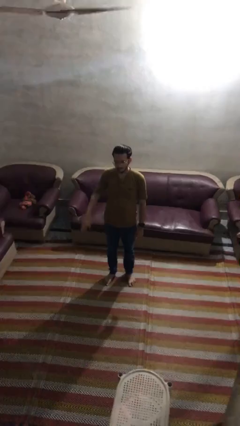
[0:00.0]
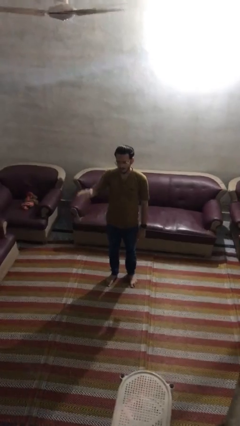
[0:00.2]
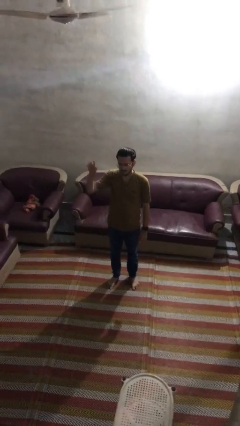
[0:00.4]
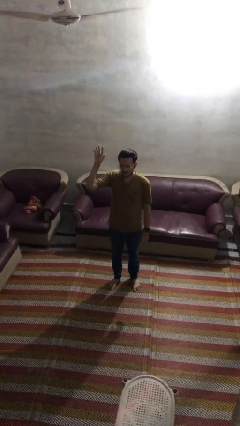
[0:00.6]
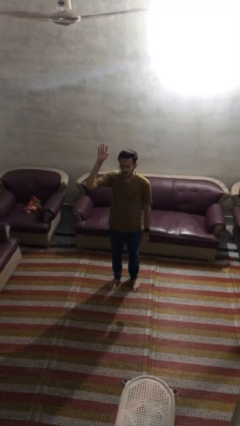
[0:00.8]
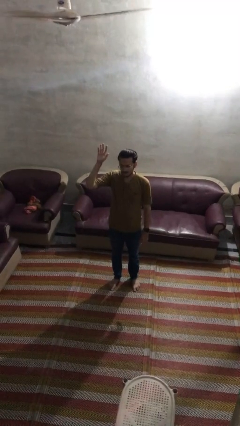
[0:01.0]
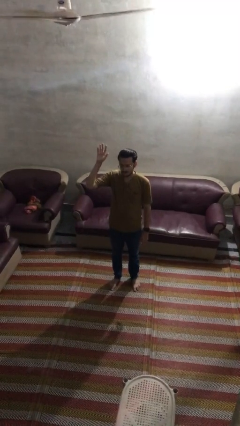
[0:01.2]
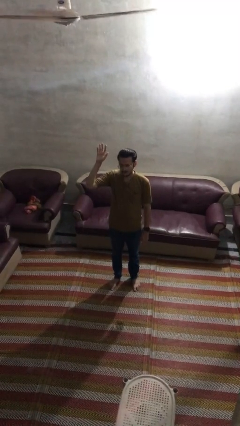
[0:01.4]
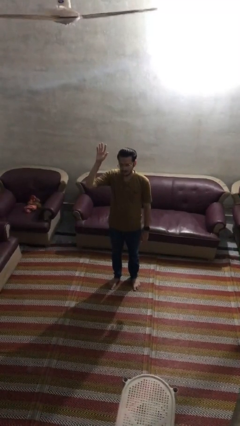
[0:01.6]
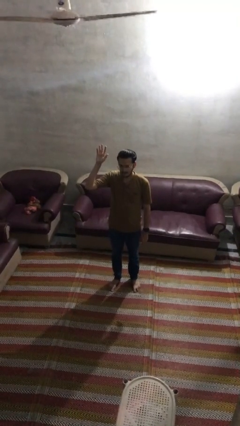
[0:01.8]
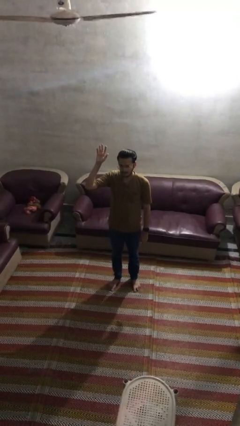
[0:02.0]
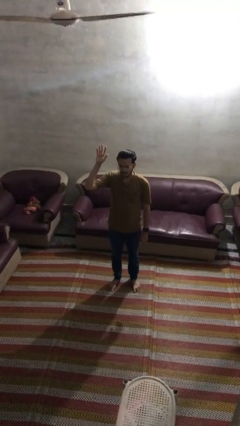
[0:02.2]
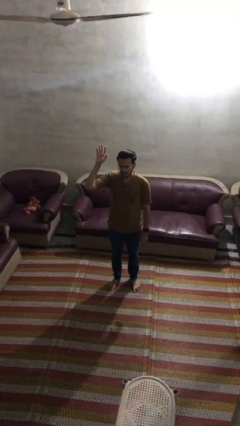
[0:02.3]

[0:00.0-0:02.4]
person gestures raise hand

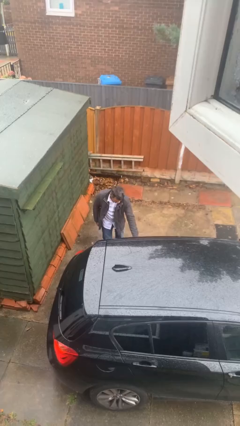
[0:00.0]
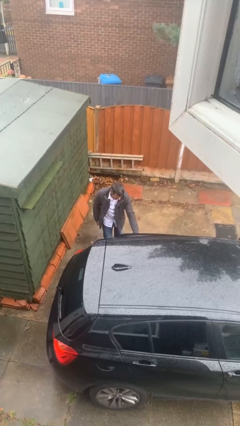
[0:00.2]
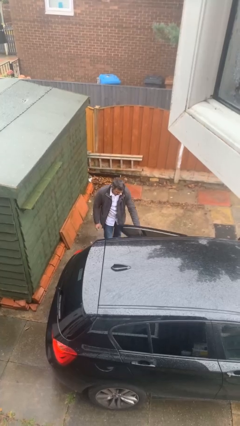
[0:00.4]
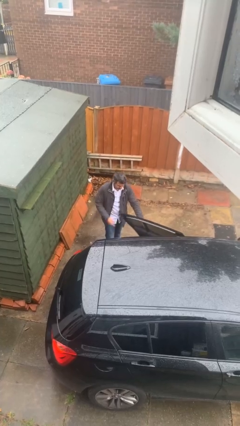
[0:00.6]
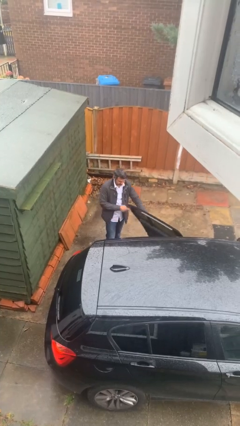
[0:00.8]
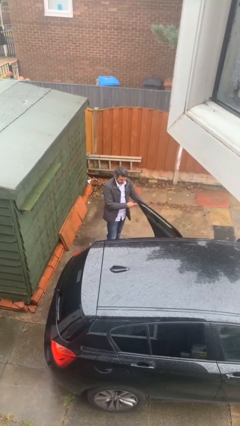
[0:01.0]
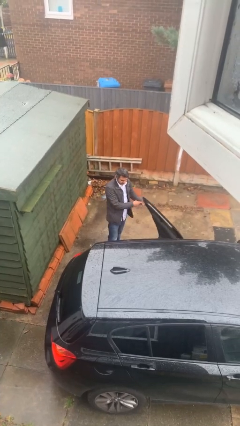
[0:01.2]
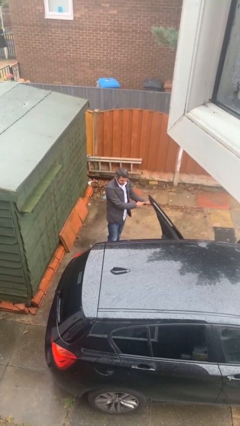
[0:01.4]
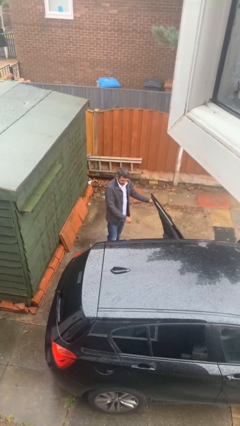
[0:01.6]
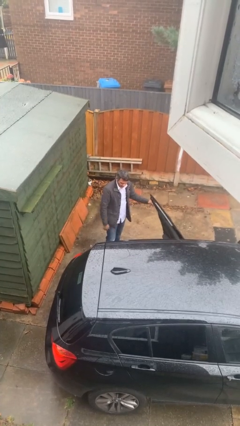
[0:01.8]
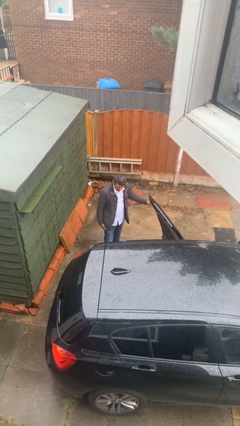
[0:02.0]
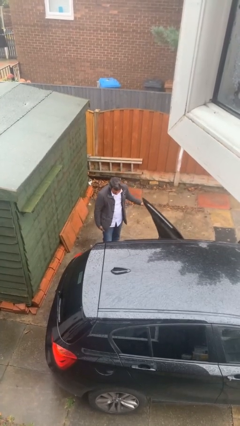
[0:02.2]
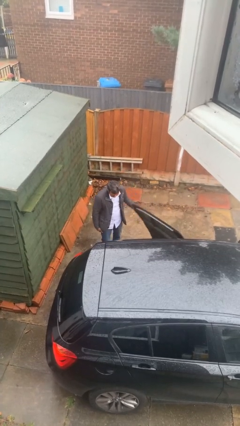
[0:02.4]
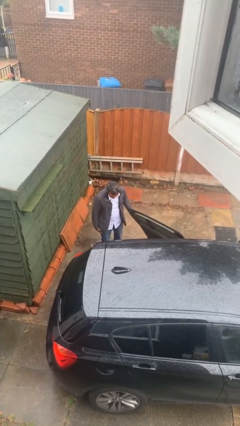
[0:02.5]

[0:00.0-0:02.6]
person opens car door

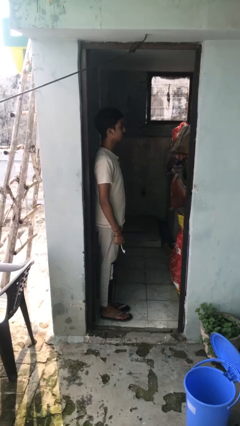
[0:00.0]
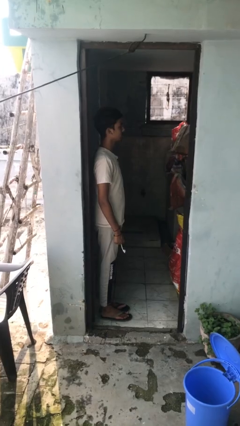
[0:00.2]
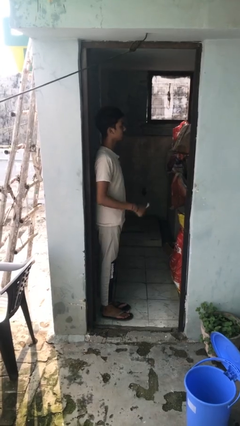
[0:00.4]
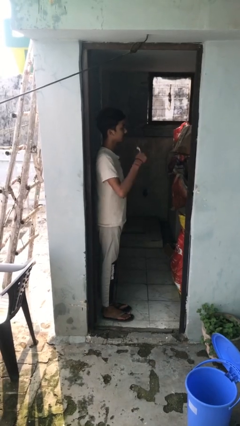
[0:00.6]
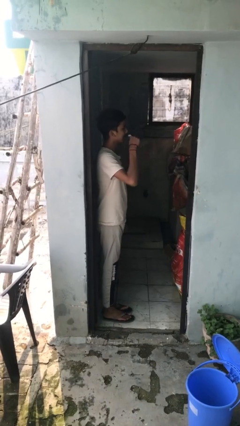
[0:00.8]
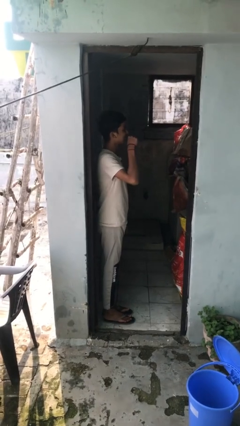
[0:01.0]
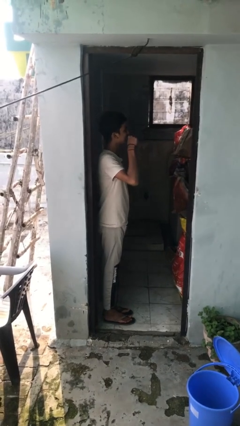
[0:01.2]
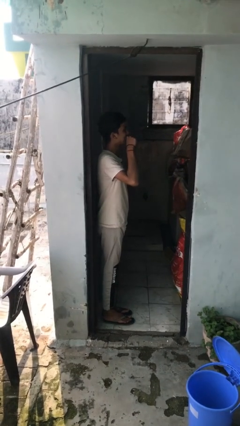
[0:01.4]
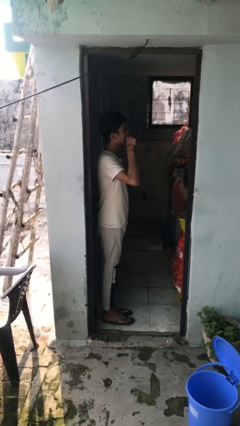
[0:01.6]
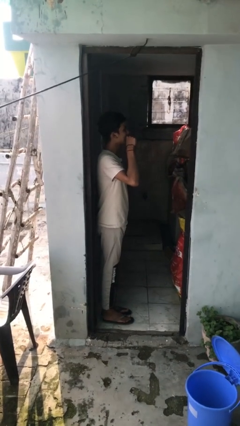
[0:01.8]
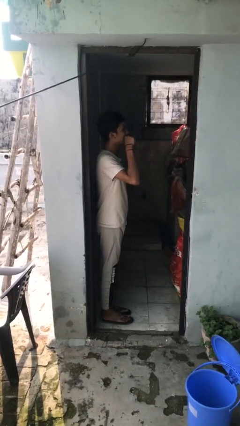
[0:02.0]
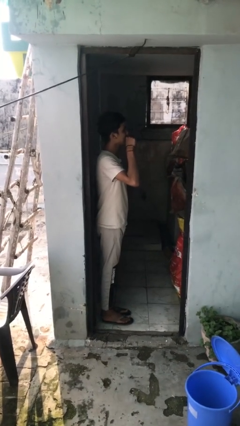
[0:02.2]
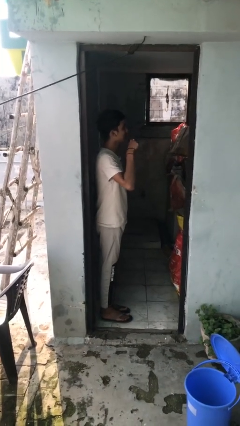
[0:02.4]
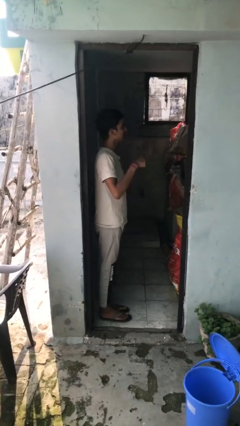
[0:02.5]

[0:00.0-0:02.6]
person brushes teeth

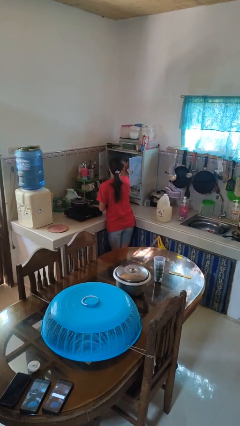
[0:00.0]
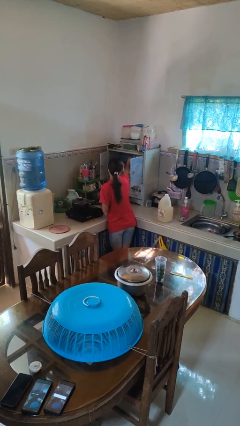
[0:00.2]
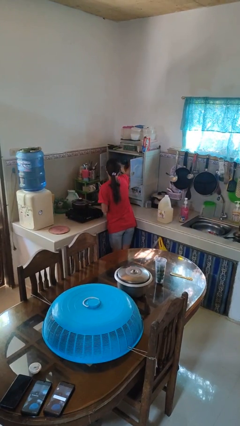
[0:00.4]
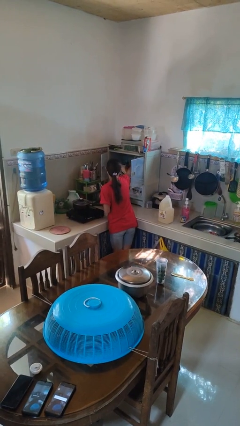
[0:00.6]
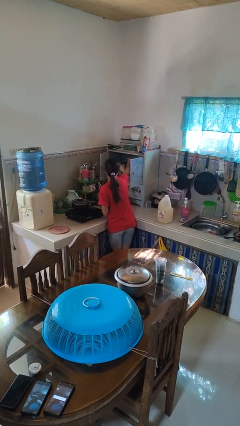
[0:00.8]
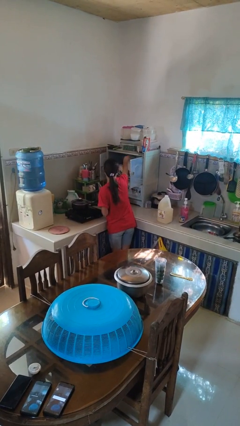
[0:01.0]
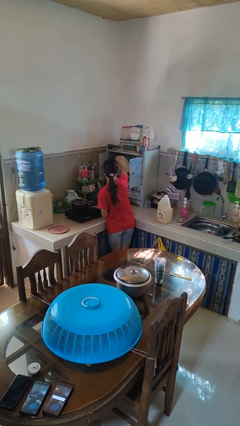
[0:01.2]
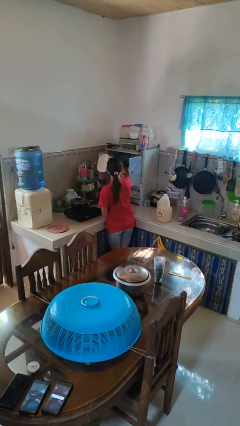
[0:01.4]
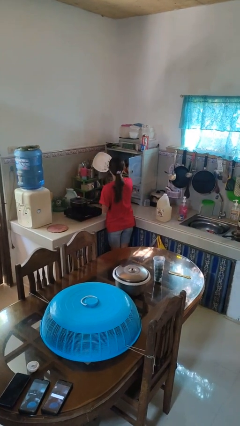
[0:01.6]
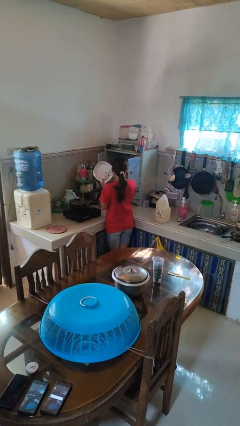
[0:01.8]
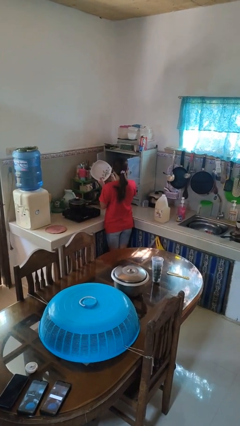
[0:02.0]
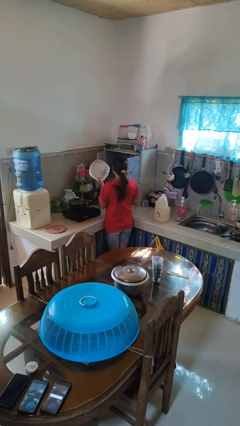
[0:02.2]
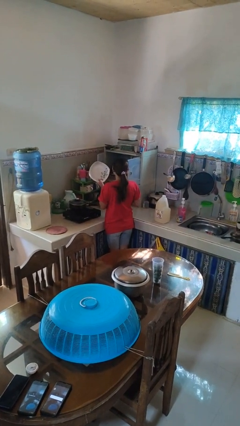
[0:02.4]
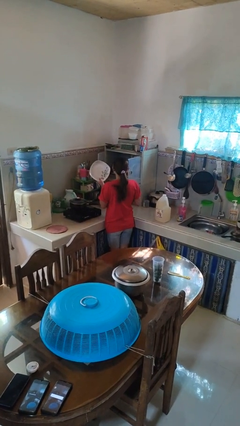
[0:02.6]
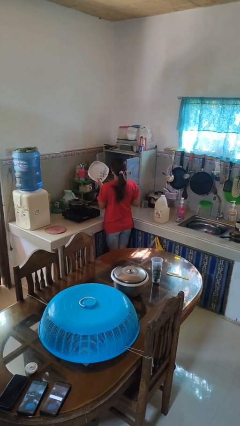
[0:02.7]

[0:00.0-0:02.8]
person takes object from cabinet

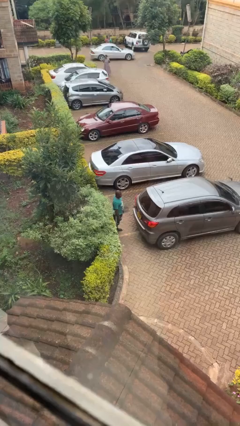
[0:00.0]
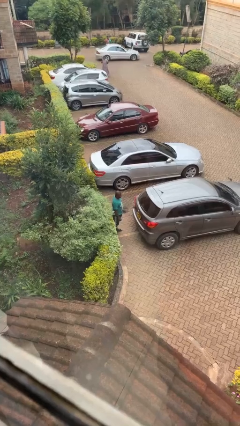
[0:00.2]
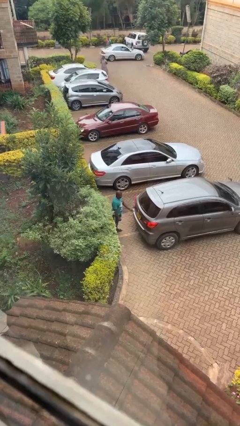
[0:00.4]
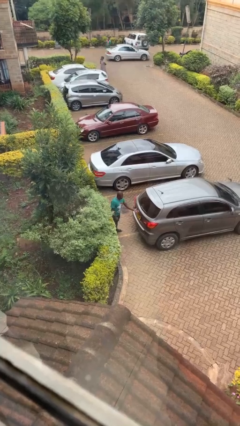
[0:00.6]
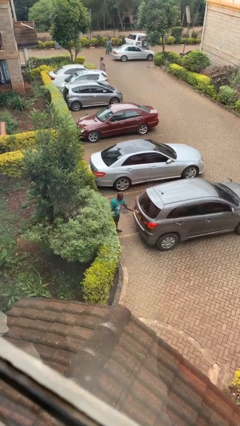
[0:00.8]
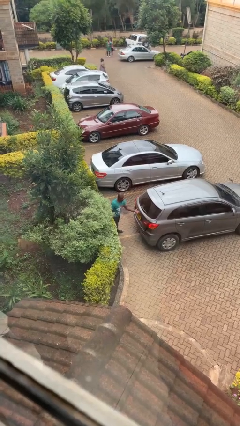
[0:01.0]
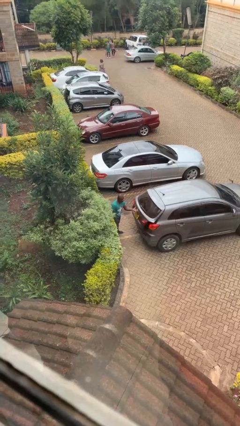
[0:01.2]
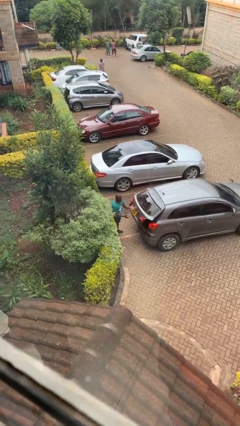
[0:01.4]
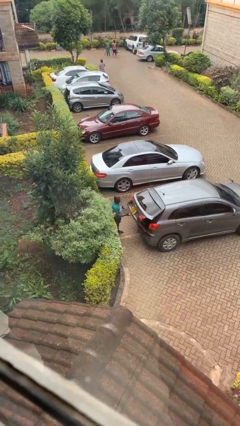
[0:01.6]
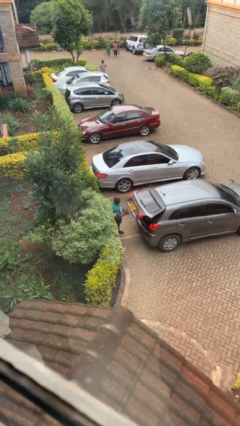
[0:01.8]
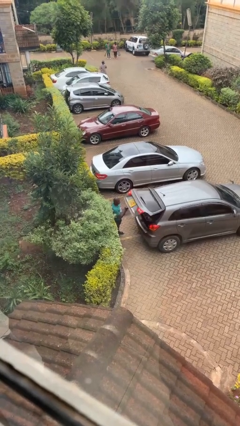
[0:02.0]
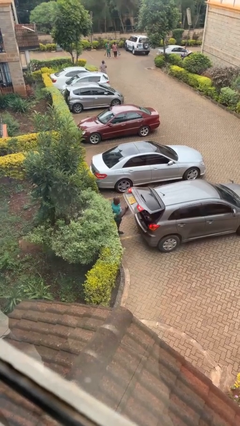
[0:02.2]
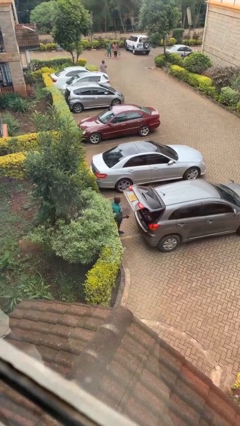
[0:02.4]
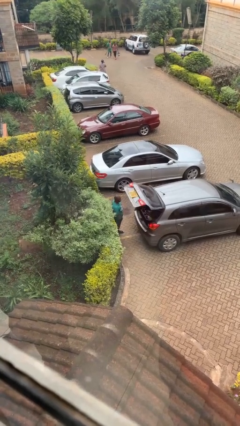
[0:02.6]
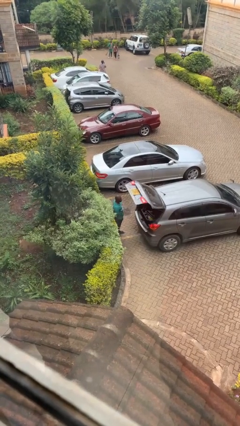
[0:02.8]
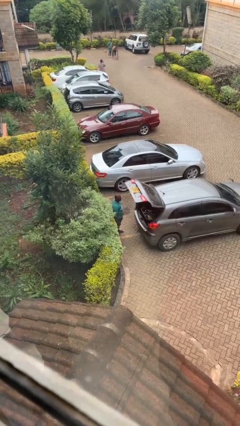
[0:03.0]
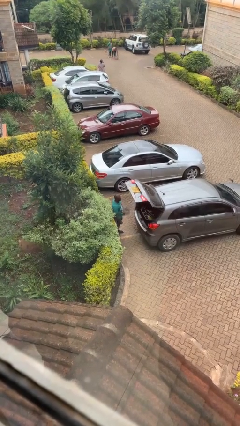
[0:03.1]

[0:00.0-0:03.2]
person opens car trunk

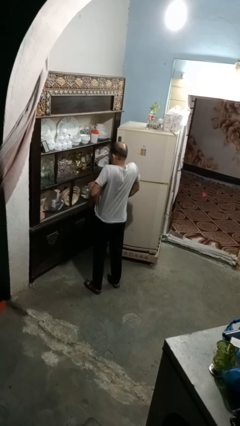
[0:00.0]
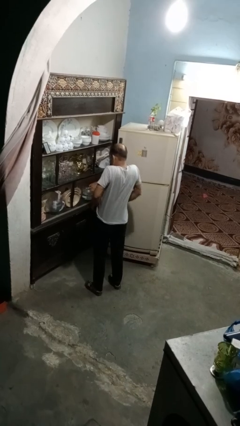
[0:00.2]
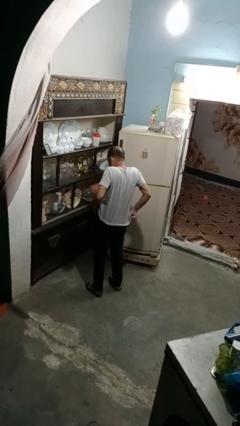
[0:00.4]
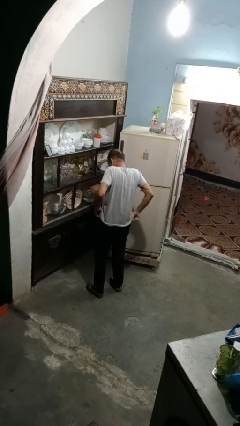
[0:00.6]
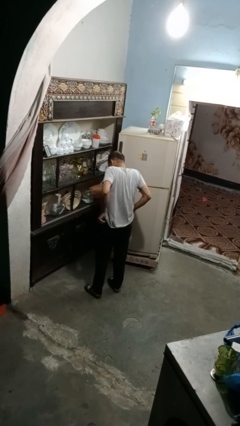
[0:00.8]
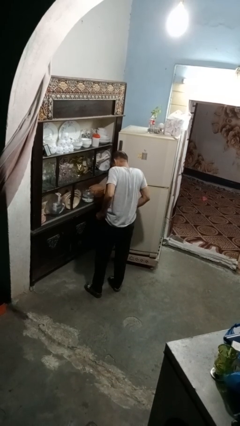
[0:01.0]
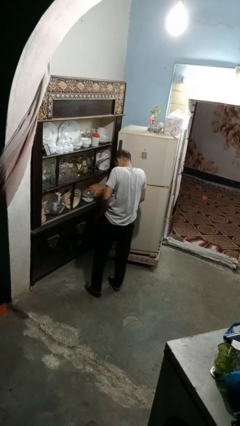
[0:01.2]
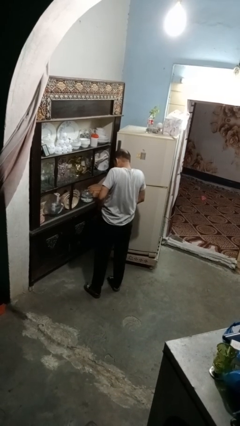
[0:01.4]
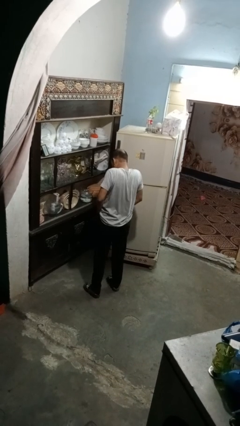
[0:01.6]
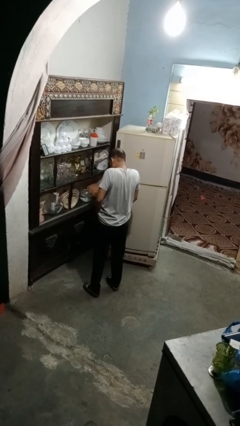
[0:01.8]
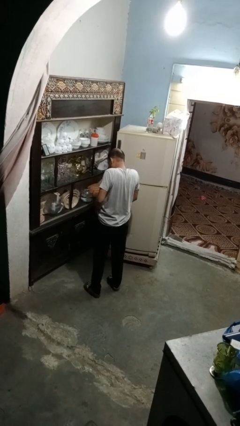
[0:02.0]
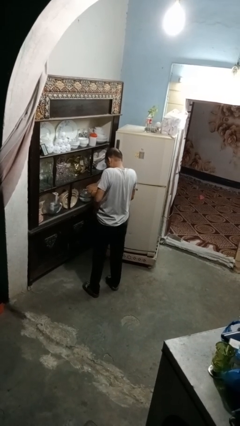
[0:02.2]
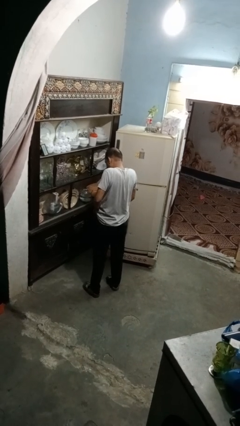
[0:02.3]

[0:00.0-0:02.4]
person hikes up pants

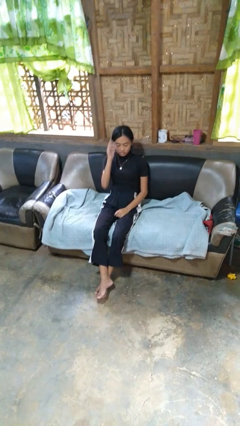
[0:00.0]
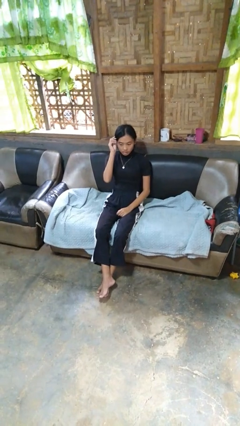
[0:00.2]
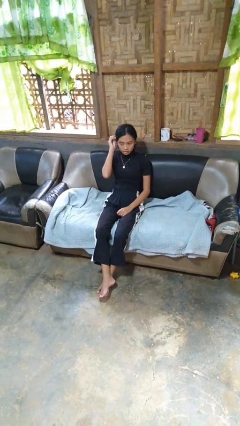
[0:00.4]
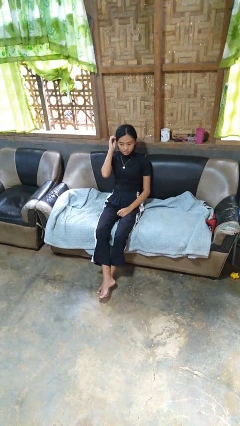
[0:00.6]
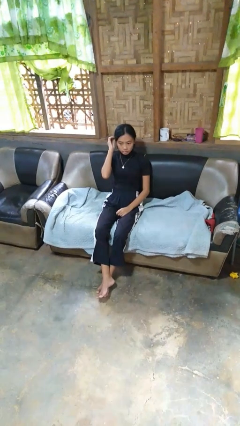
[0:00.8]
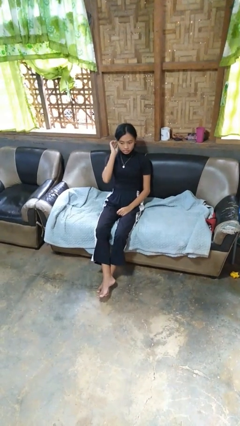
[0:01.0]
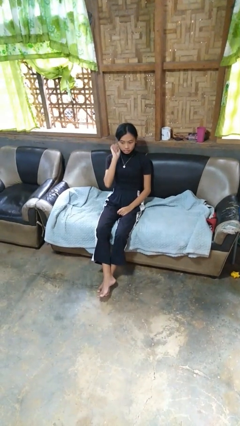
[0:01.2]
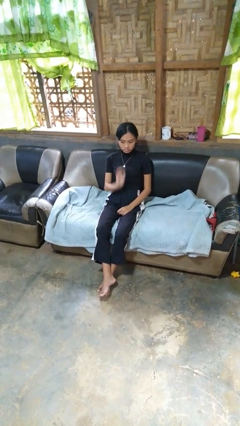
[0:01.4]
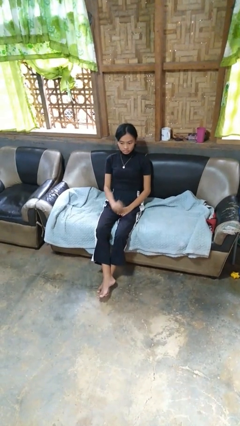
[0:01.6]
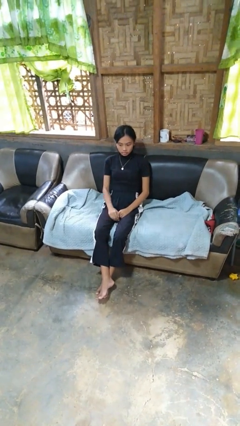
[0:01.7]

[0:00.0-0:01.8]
person strokes hair
